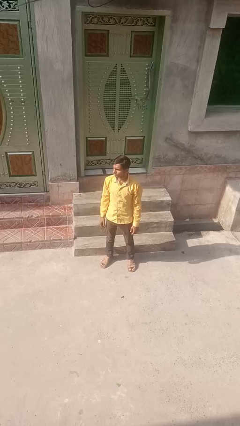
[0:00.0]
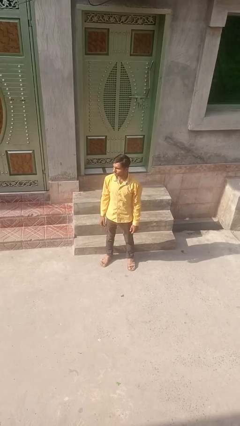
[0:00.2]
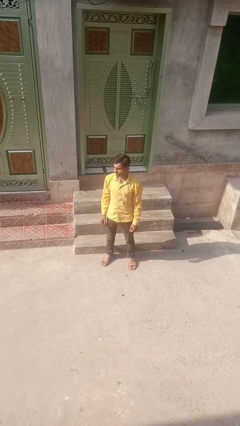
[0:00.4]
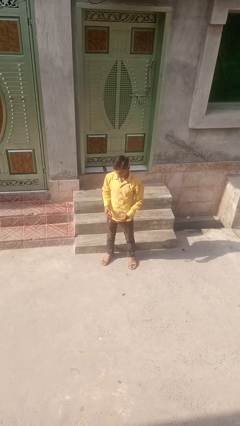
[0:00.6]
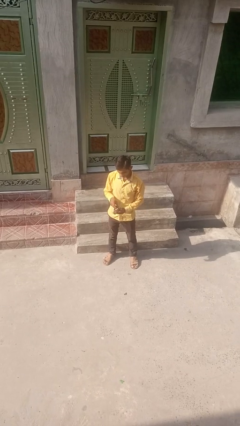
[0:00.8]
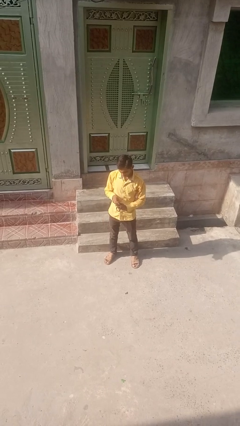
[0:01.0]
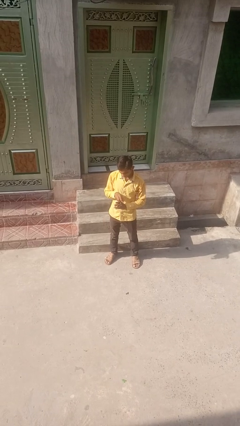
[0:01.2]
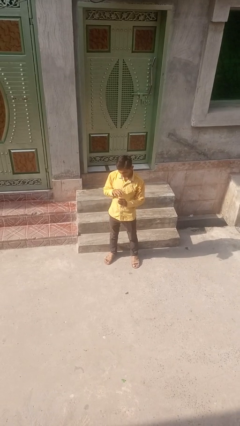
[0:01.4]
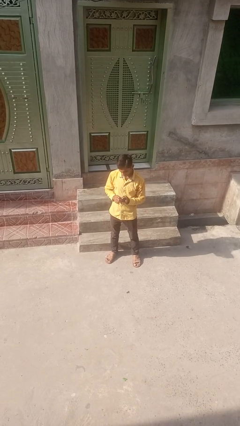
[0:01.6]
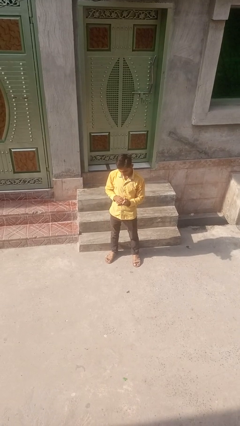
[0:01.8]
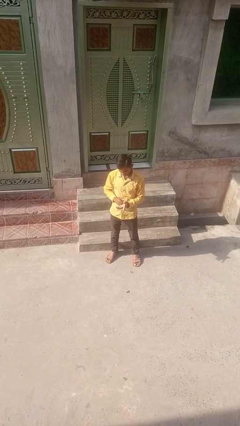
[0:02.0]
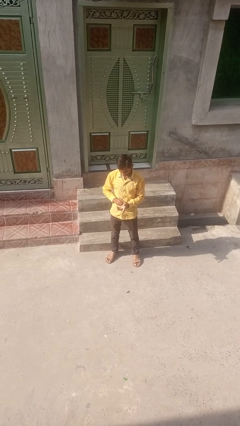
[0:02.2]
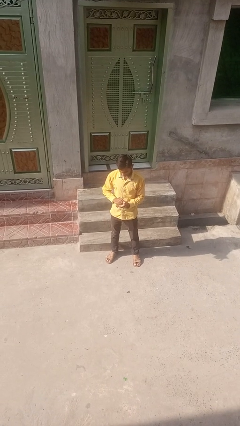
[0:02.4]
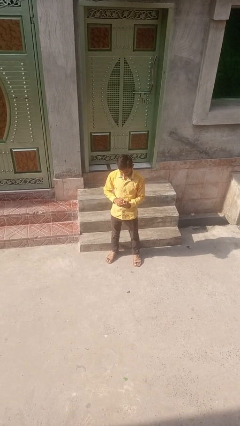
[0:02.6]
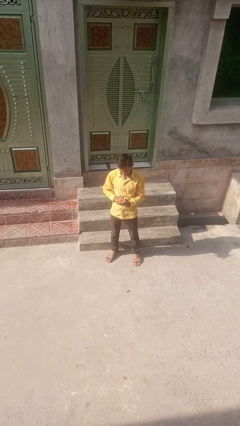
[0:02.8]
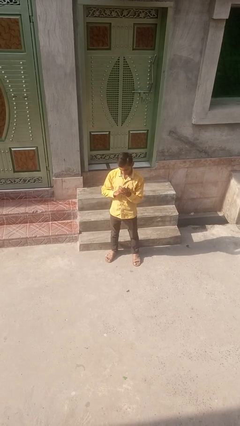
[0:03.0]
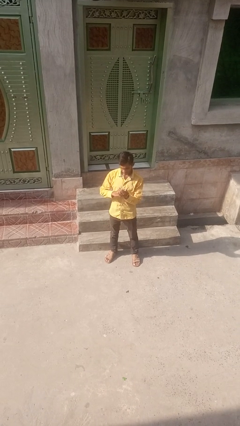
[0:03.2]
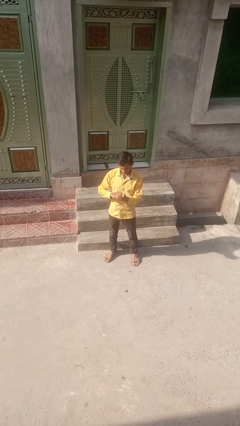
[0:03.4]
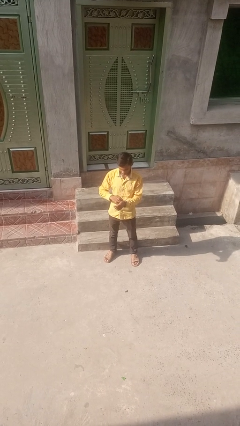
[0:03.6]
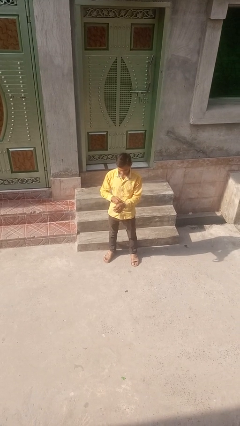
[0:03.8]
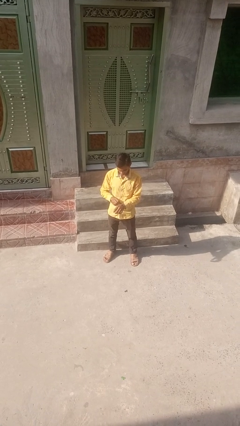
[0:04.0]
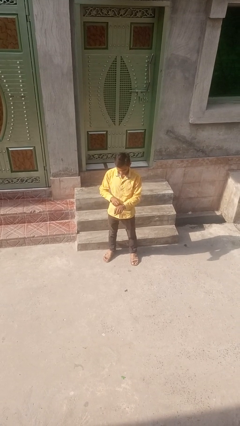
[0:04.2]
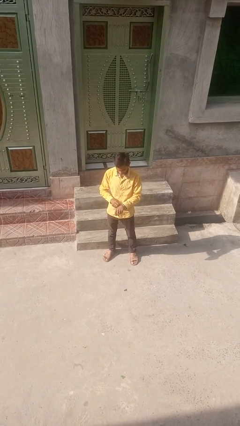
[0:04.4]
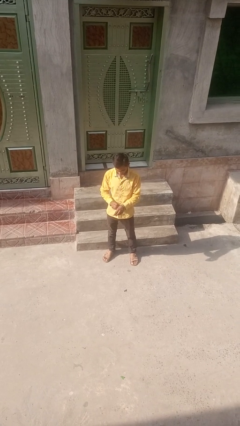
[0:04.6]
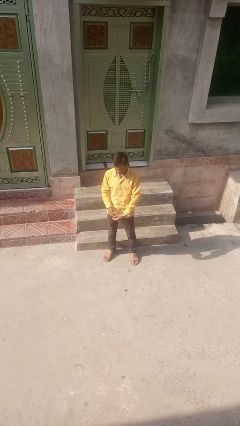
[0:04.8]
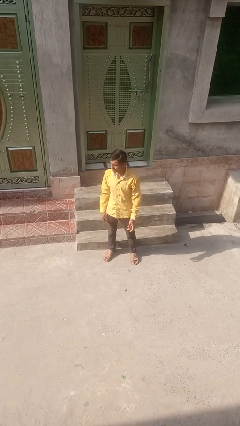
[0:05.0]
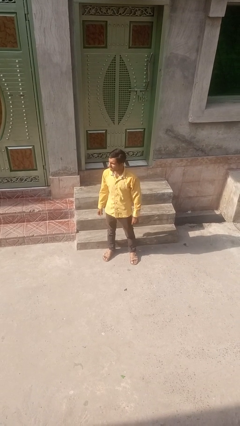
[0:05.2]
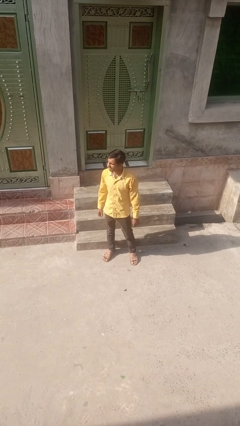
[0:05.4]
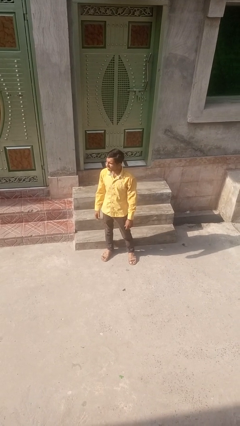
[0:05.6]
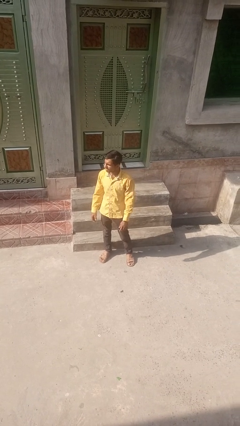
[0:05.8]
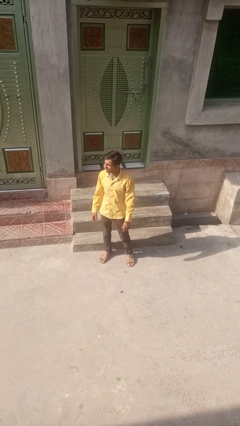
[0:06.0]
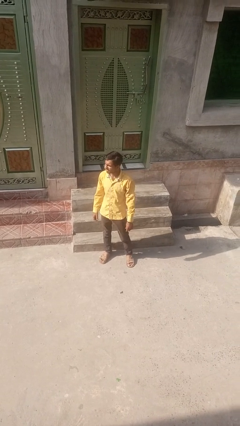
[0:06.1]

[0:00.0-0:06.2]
person puts on wristwatch

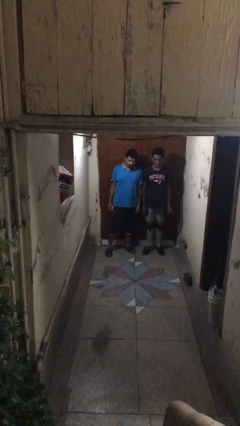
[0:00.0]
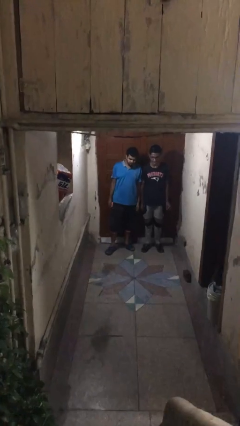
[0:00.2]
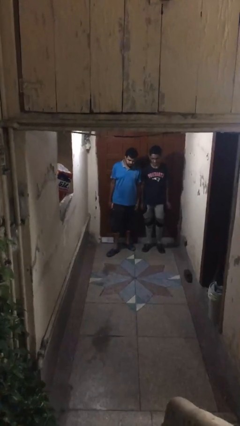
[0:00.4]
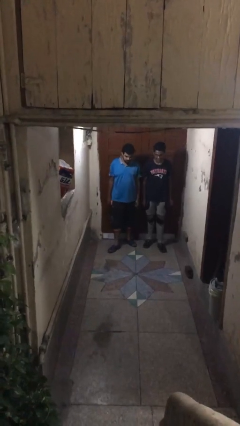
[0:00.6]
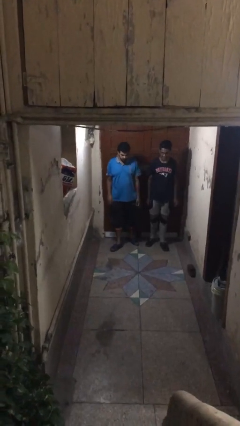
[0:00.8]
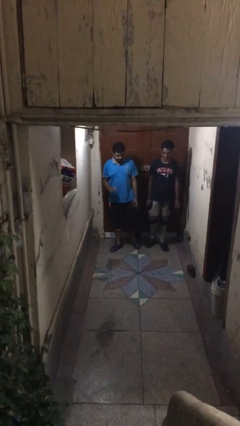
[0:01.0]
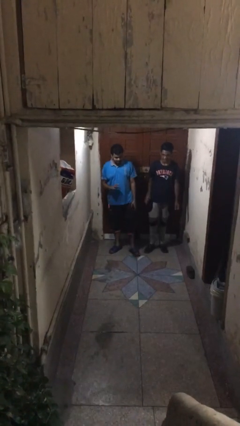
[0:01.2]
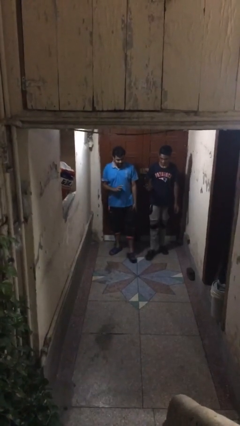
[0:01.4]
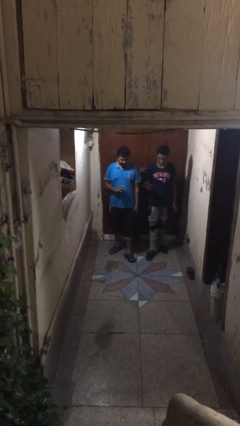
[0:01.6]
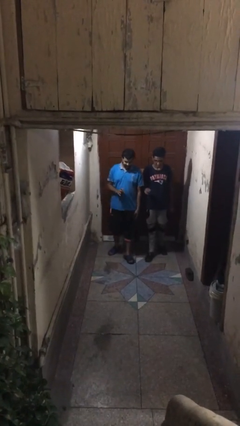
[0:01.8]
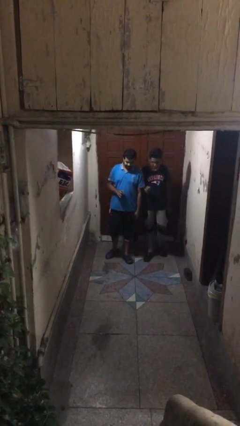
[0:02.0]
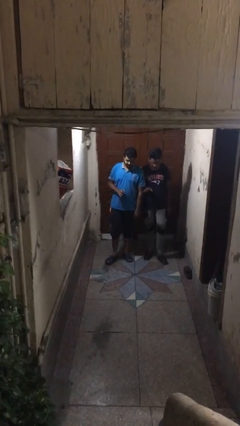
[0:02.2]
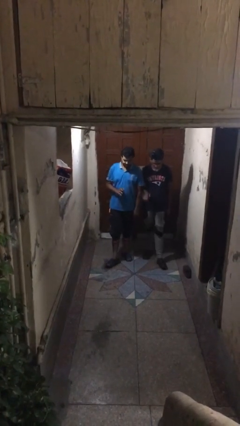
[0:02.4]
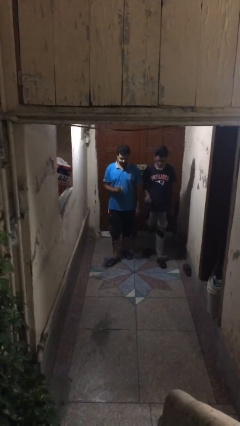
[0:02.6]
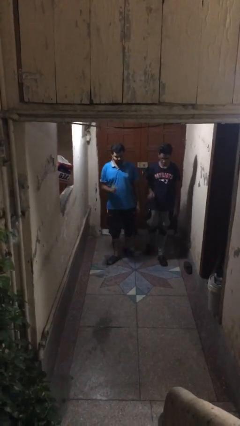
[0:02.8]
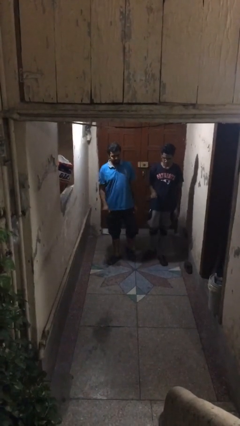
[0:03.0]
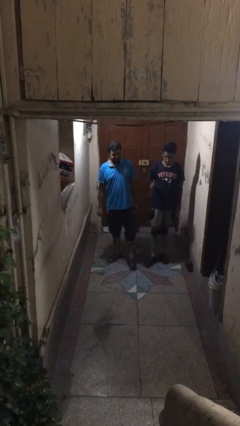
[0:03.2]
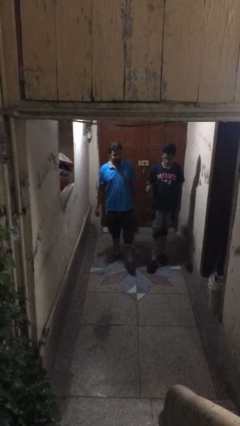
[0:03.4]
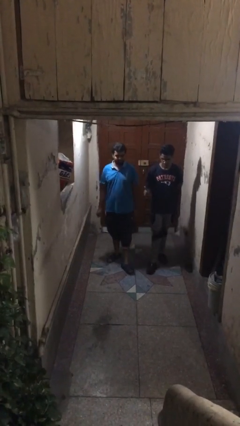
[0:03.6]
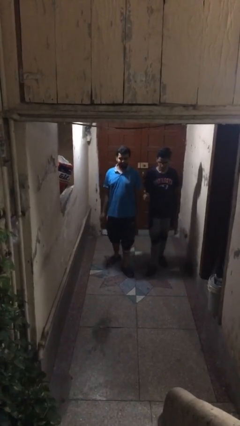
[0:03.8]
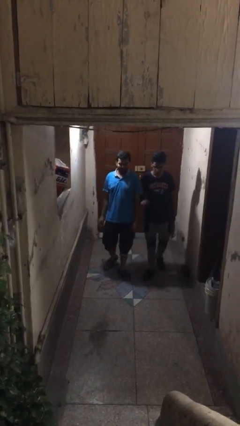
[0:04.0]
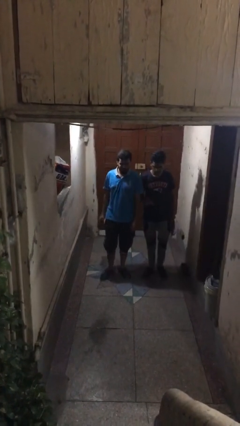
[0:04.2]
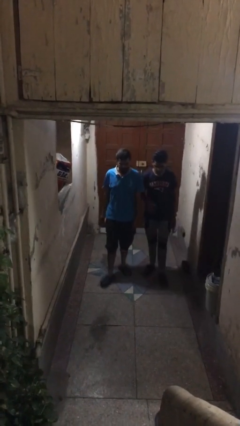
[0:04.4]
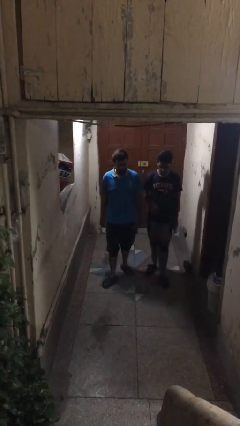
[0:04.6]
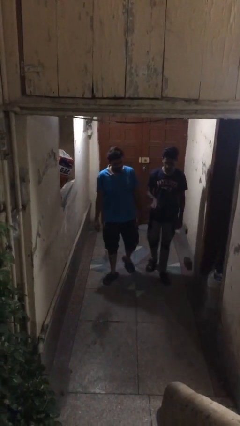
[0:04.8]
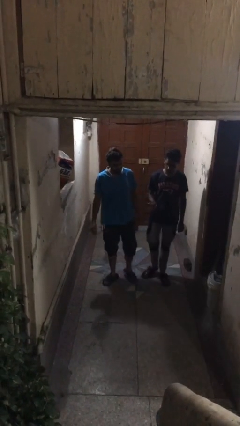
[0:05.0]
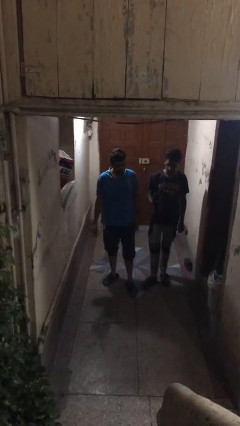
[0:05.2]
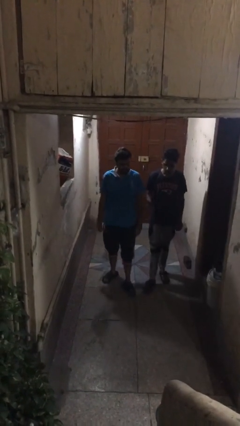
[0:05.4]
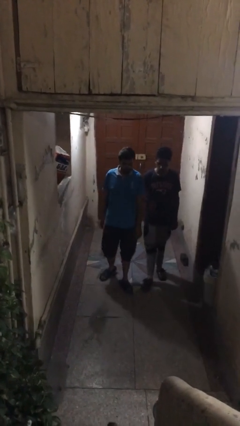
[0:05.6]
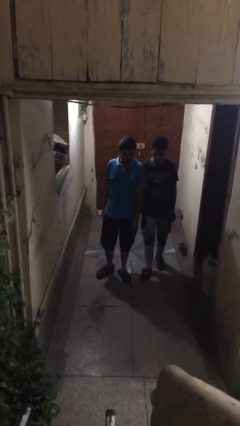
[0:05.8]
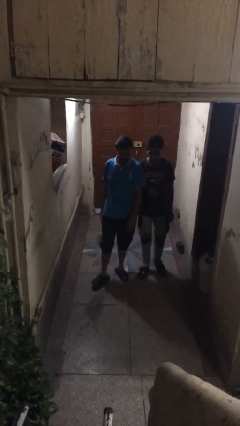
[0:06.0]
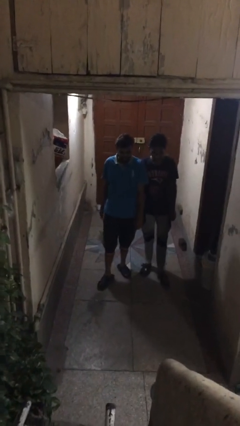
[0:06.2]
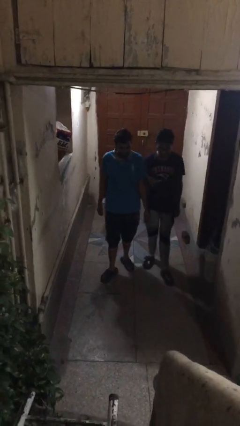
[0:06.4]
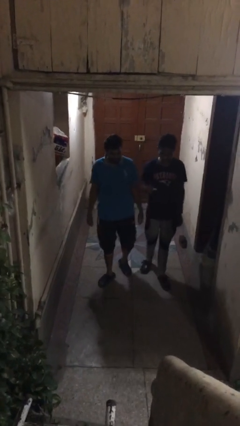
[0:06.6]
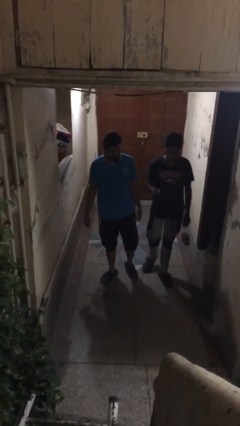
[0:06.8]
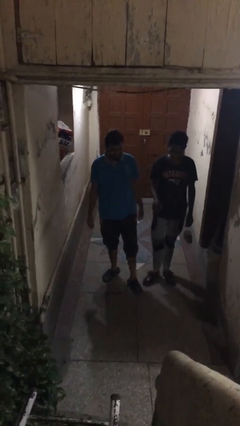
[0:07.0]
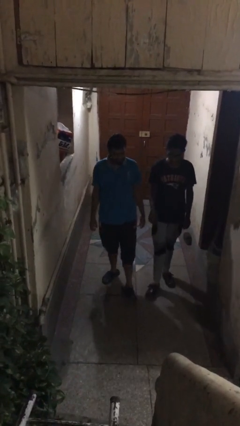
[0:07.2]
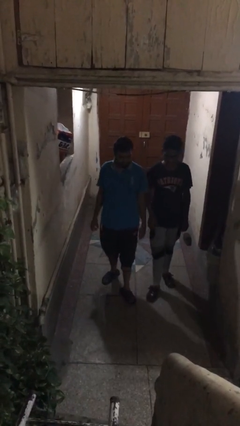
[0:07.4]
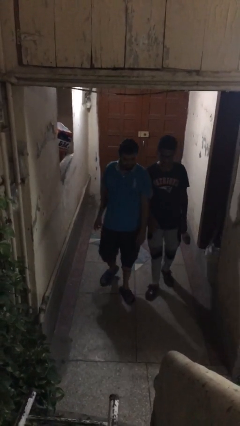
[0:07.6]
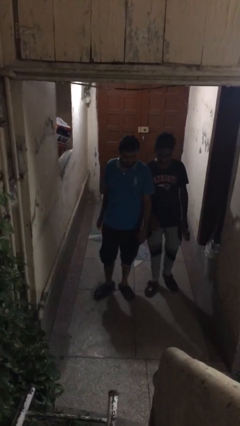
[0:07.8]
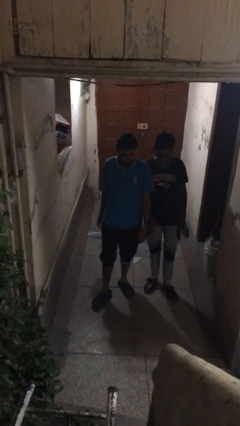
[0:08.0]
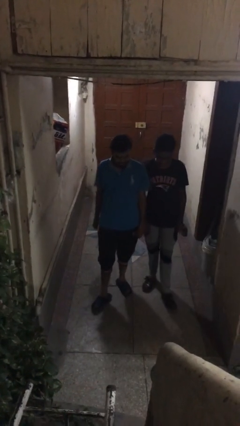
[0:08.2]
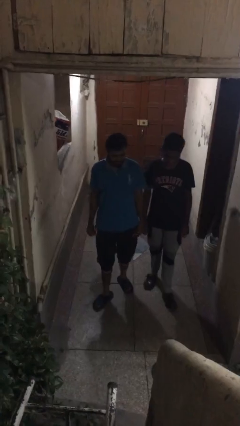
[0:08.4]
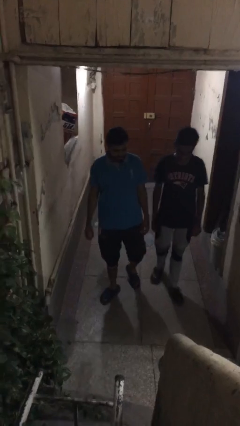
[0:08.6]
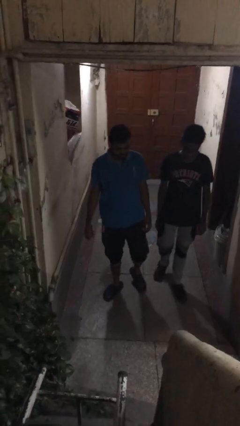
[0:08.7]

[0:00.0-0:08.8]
person talks to person

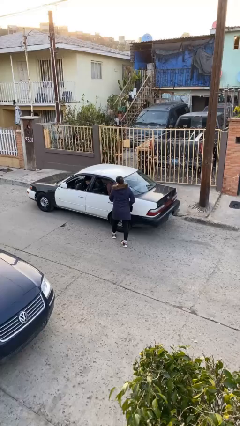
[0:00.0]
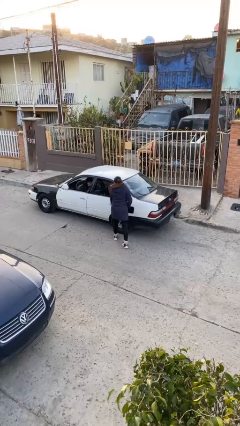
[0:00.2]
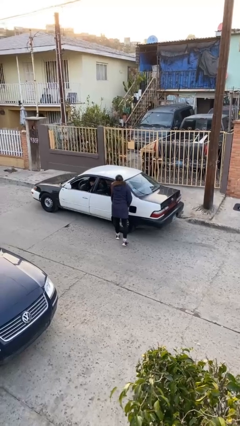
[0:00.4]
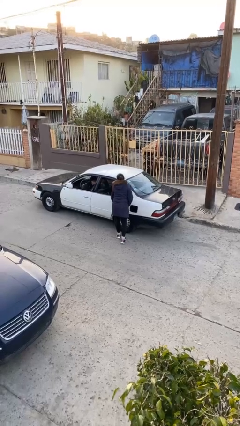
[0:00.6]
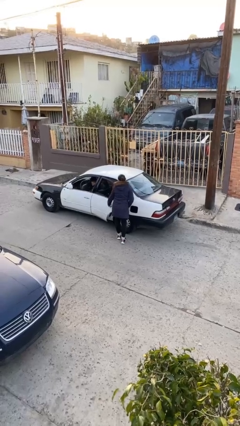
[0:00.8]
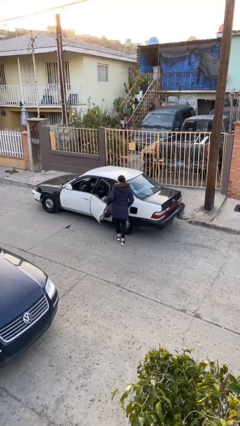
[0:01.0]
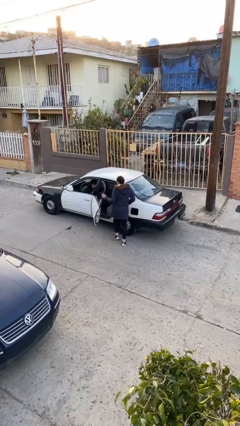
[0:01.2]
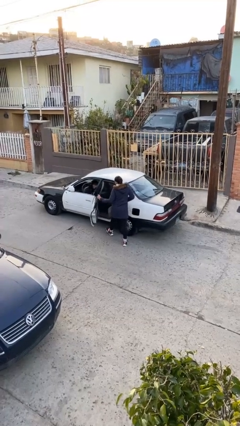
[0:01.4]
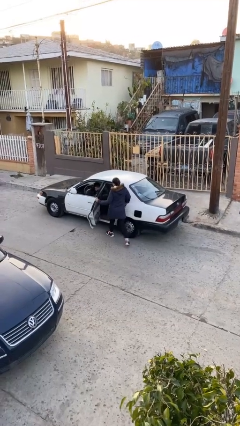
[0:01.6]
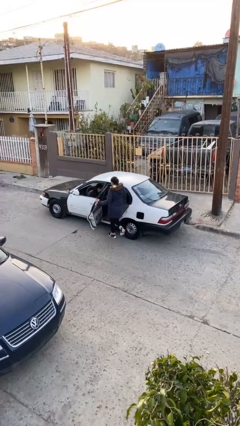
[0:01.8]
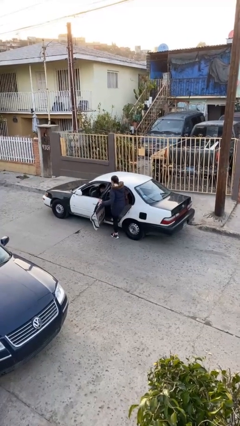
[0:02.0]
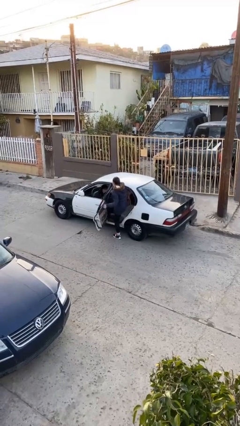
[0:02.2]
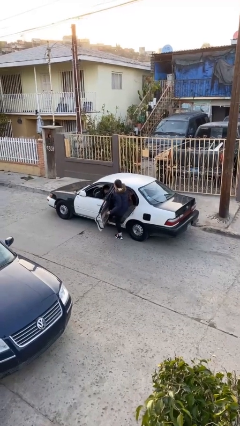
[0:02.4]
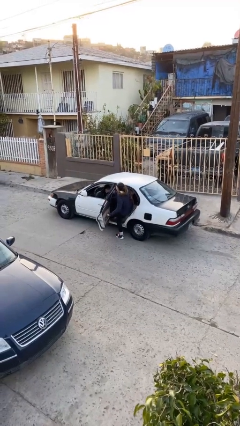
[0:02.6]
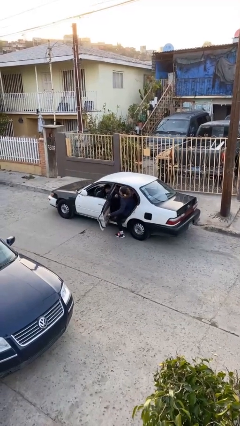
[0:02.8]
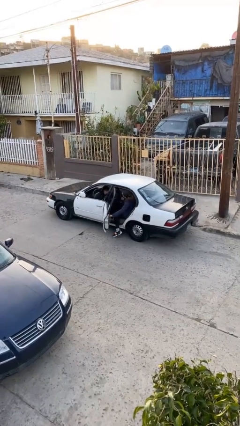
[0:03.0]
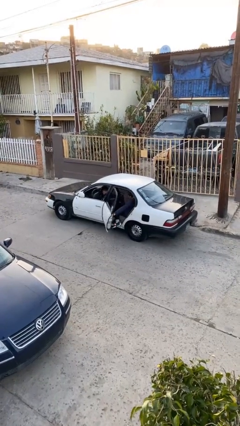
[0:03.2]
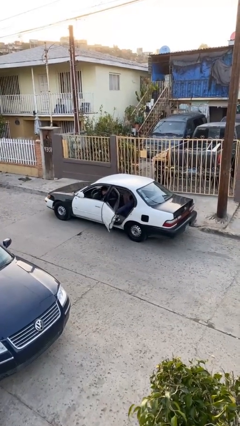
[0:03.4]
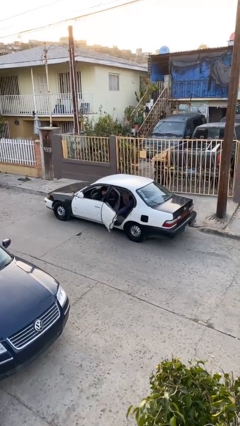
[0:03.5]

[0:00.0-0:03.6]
car picks up person
